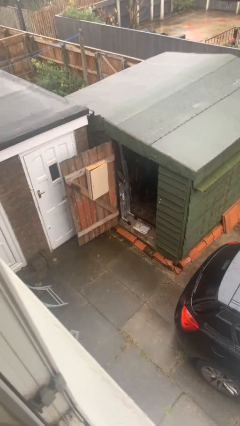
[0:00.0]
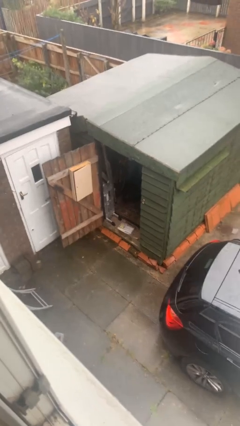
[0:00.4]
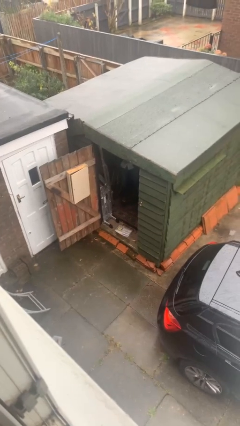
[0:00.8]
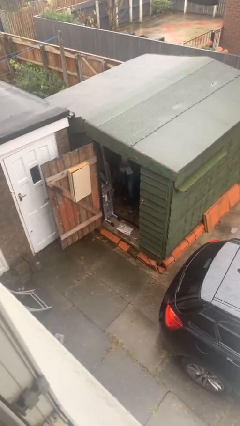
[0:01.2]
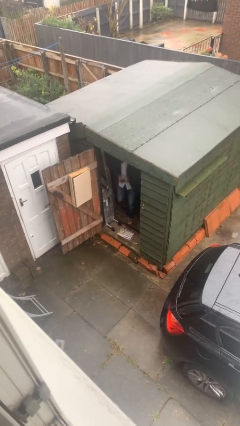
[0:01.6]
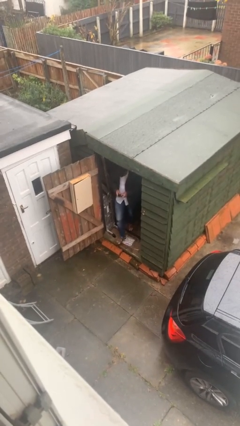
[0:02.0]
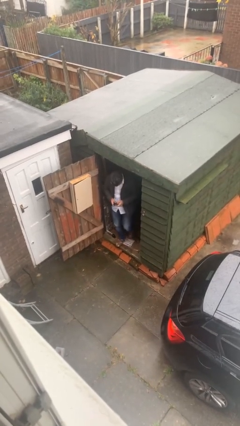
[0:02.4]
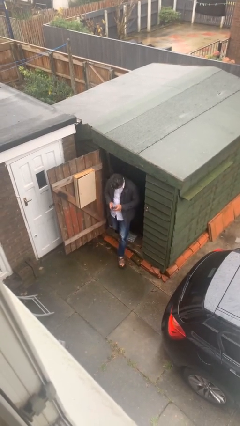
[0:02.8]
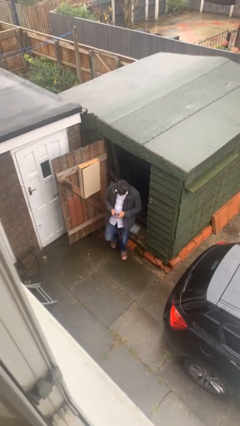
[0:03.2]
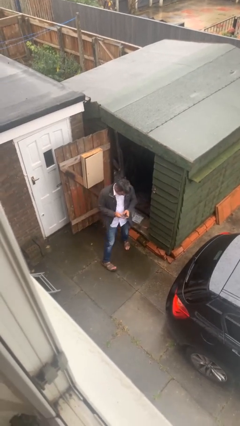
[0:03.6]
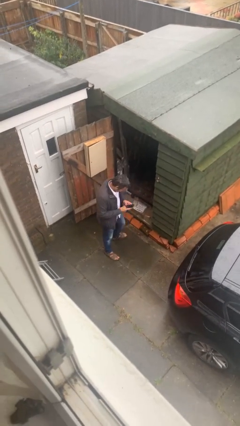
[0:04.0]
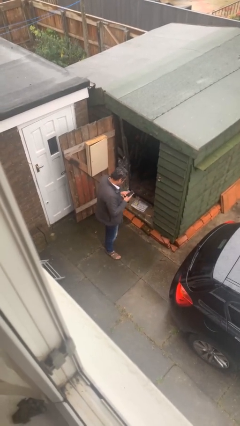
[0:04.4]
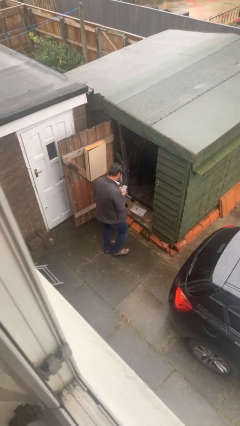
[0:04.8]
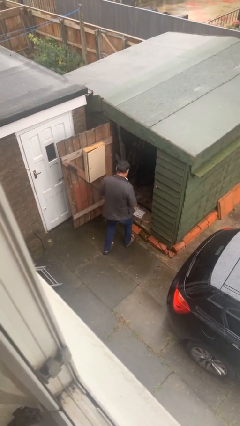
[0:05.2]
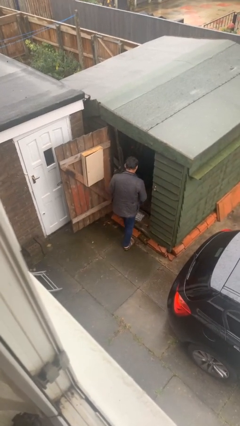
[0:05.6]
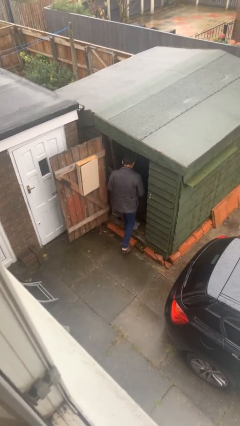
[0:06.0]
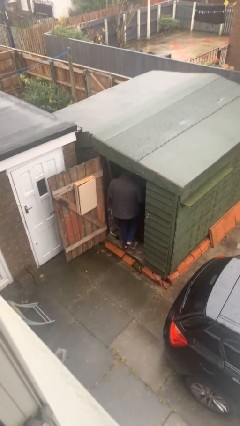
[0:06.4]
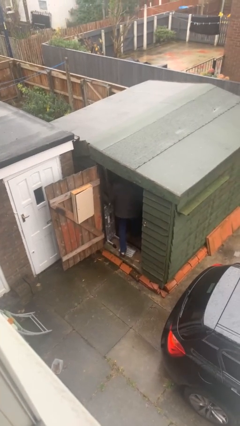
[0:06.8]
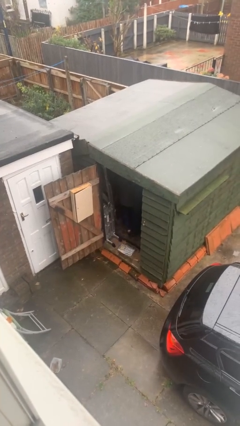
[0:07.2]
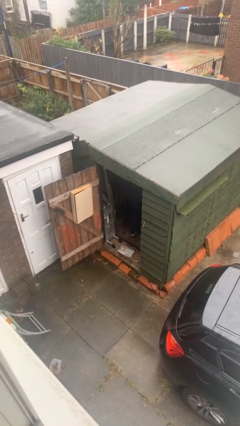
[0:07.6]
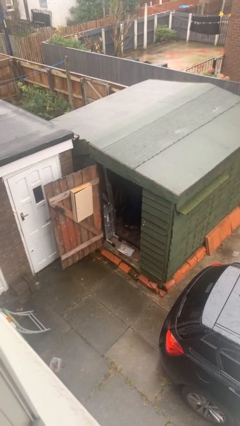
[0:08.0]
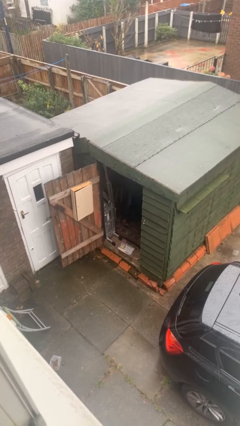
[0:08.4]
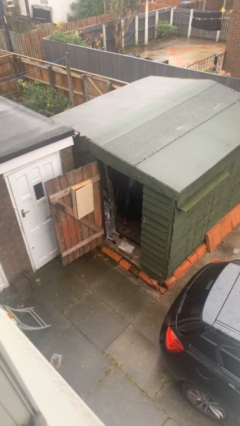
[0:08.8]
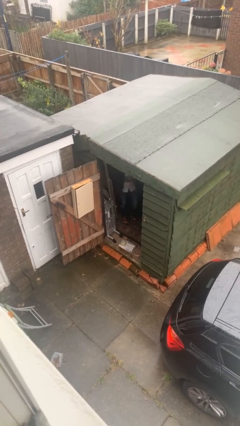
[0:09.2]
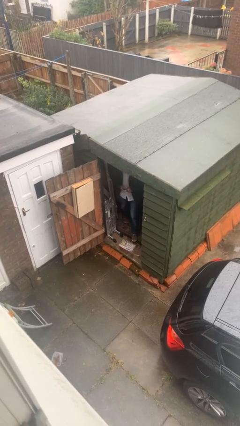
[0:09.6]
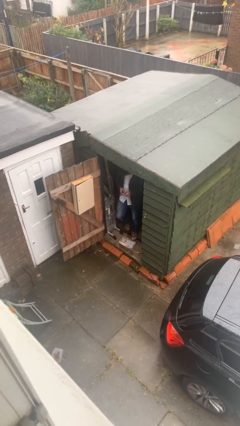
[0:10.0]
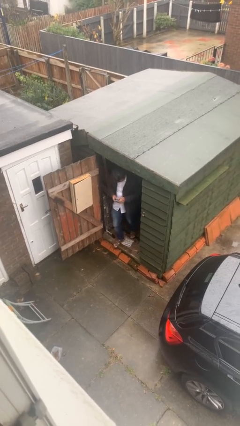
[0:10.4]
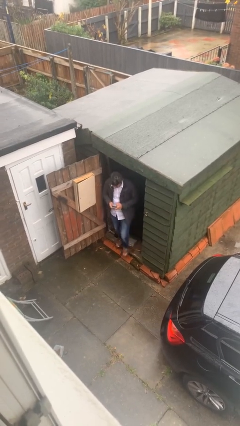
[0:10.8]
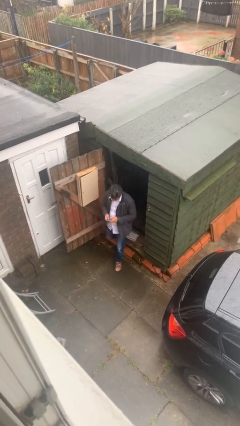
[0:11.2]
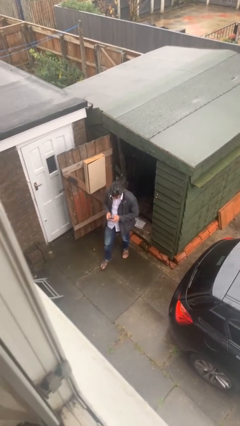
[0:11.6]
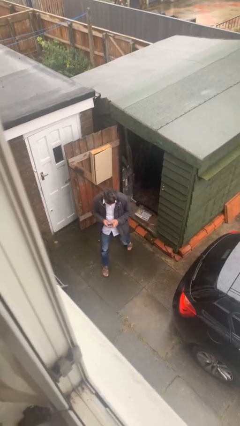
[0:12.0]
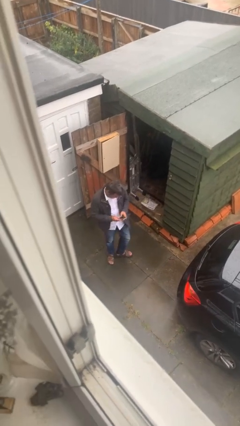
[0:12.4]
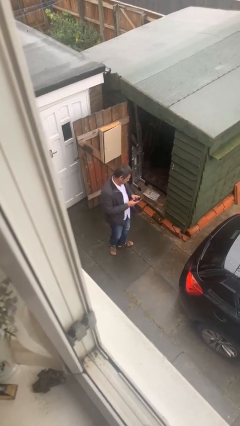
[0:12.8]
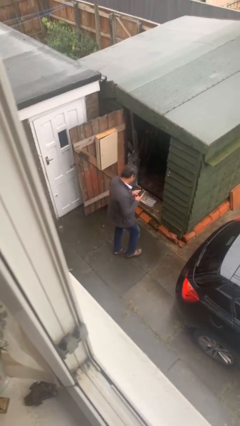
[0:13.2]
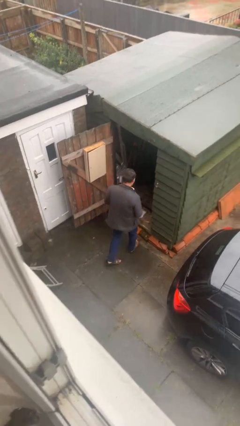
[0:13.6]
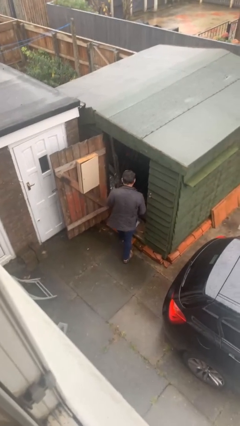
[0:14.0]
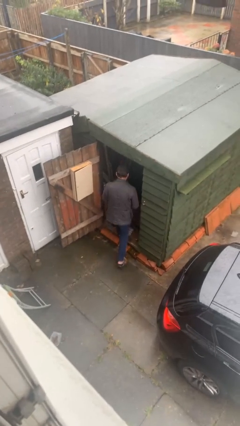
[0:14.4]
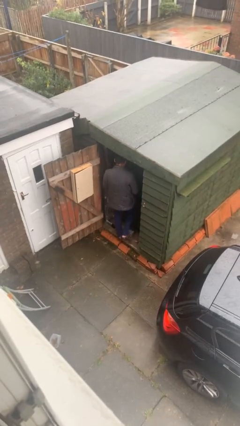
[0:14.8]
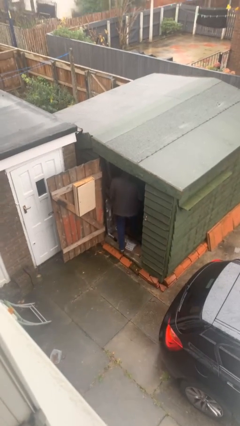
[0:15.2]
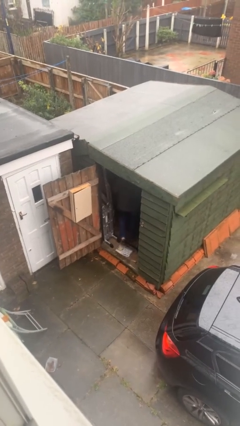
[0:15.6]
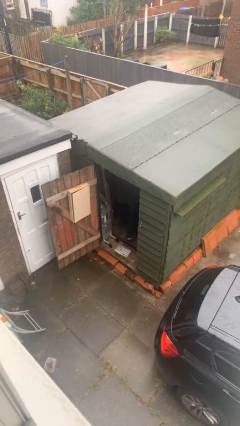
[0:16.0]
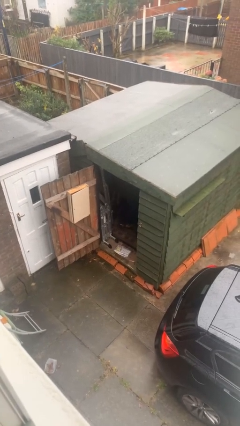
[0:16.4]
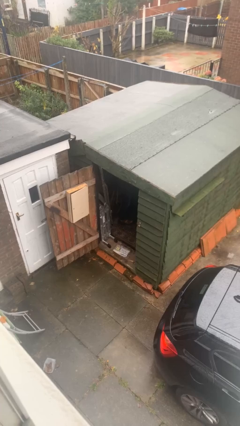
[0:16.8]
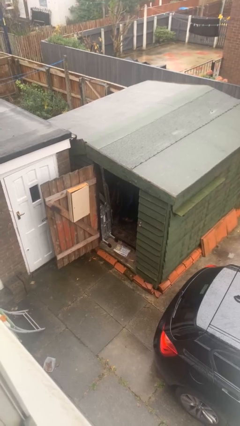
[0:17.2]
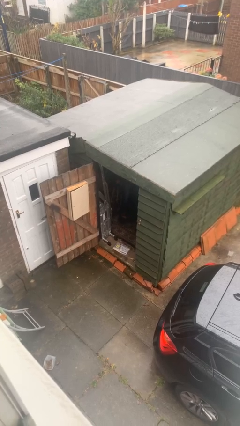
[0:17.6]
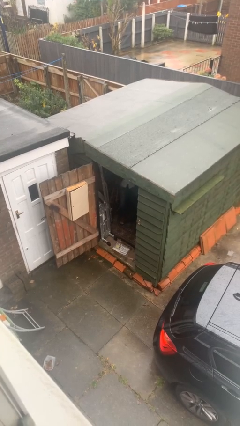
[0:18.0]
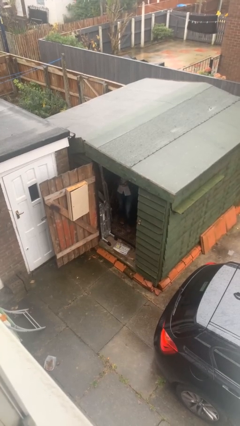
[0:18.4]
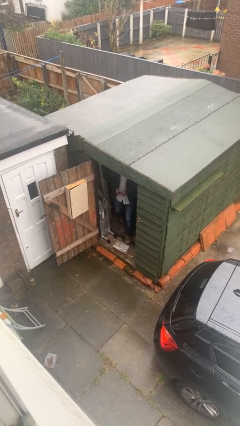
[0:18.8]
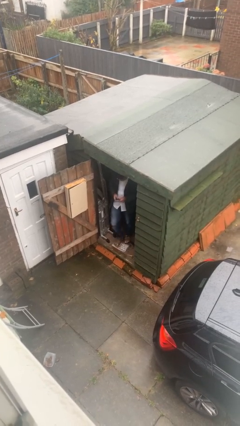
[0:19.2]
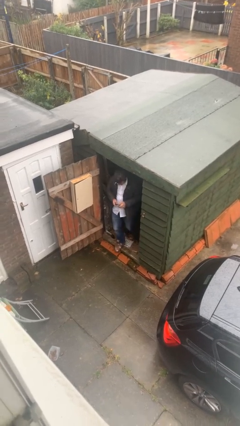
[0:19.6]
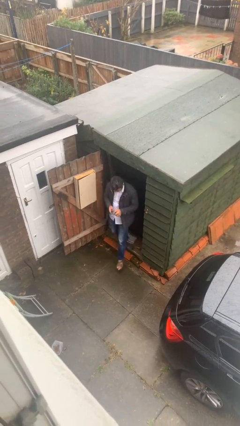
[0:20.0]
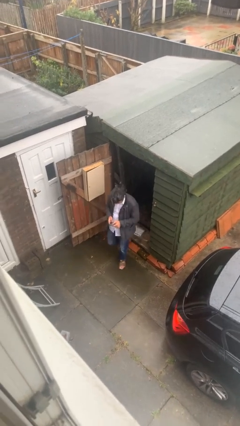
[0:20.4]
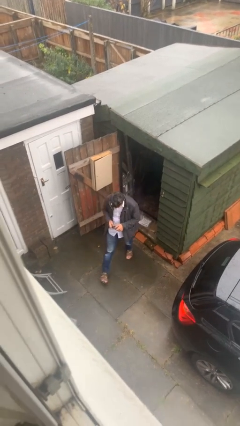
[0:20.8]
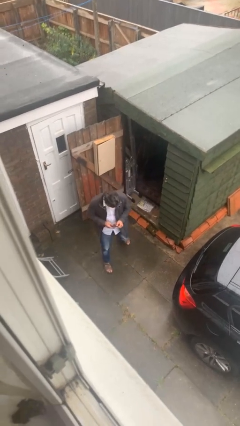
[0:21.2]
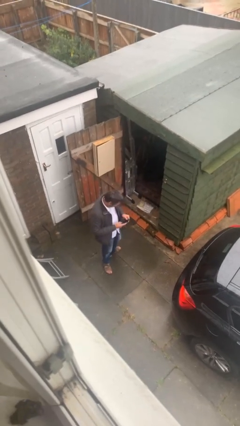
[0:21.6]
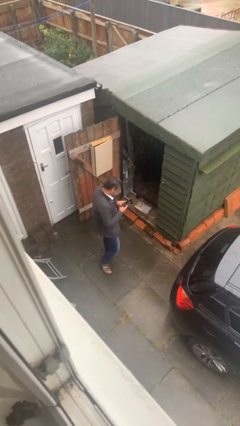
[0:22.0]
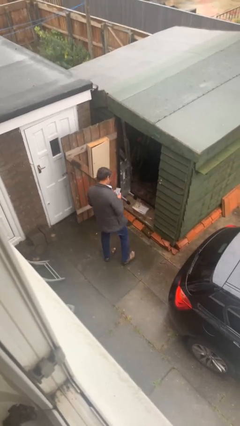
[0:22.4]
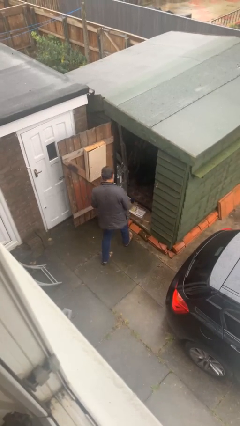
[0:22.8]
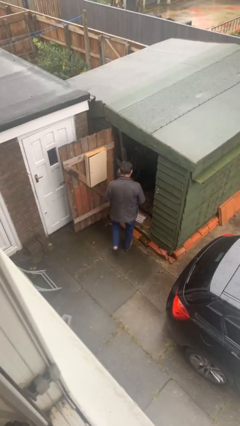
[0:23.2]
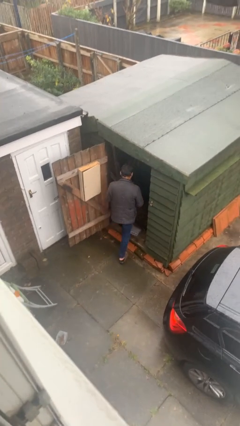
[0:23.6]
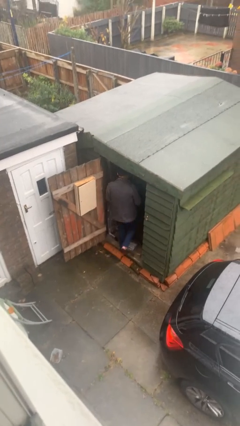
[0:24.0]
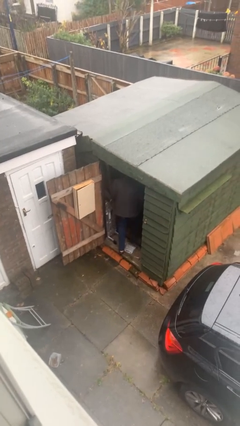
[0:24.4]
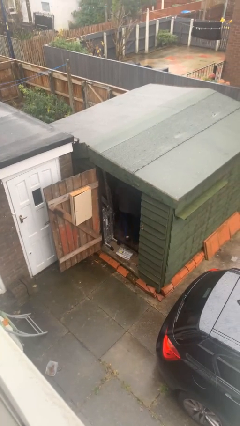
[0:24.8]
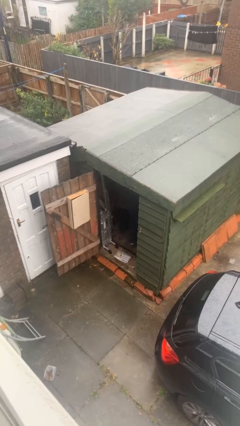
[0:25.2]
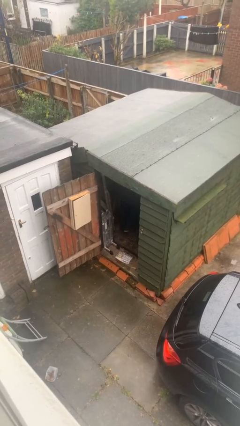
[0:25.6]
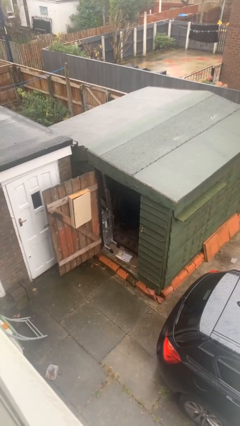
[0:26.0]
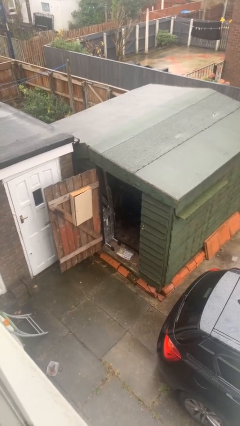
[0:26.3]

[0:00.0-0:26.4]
person texts on phone

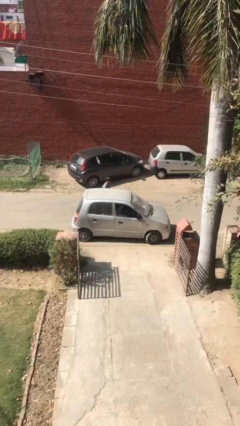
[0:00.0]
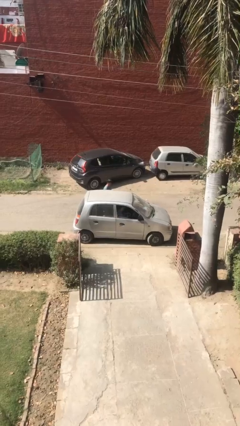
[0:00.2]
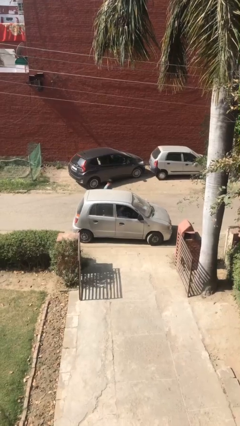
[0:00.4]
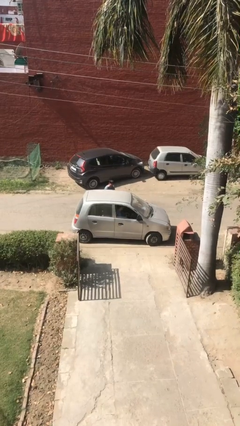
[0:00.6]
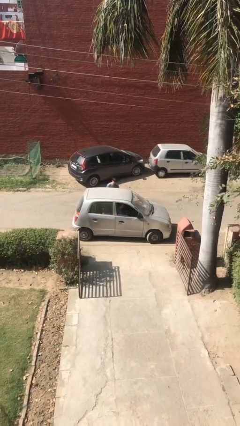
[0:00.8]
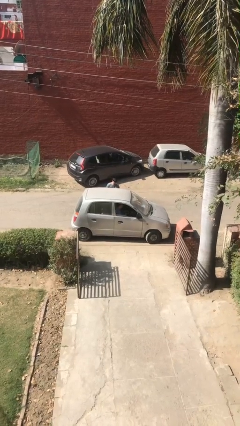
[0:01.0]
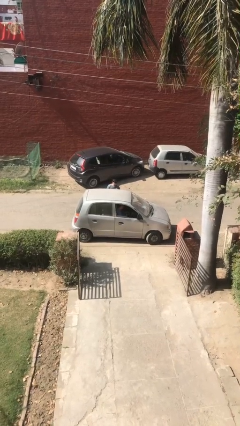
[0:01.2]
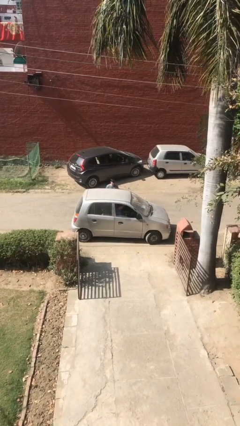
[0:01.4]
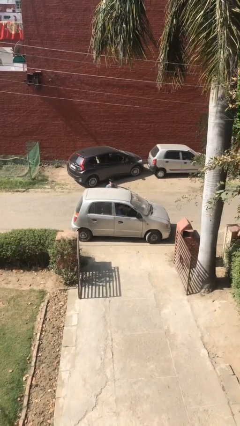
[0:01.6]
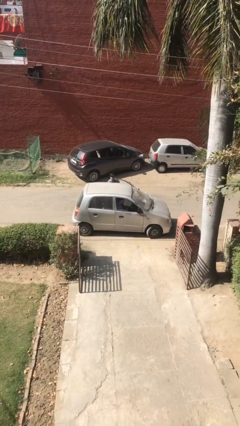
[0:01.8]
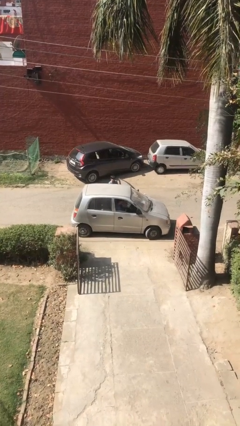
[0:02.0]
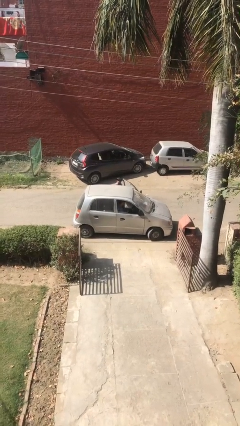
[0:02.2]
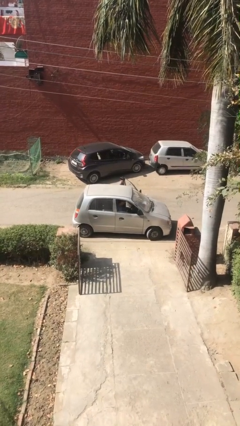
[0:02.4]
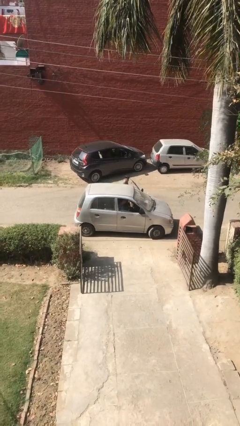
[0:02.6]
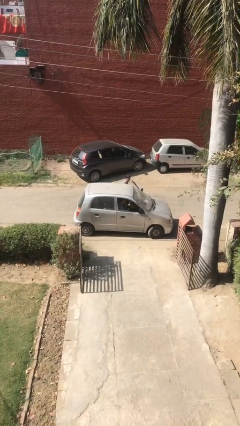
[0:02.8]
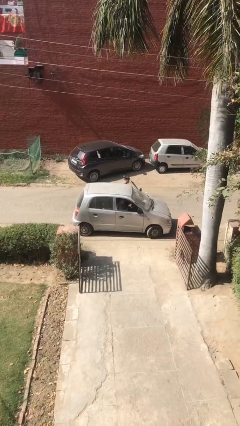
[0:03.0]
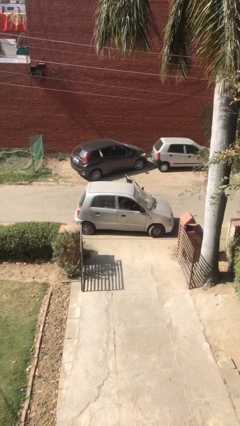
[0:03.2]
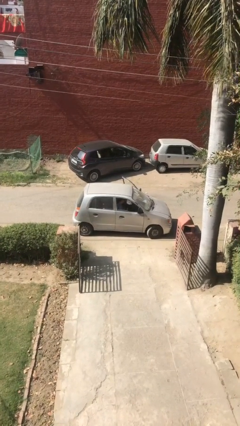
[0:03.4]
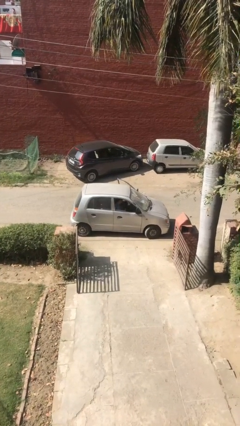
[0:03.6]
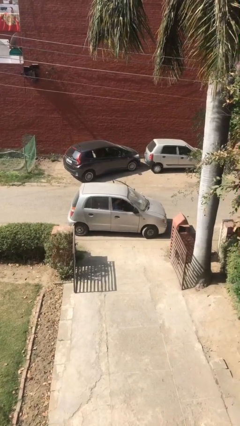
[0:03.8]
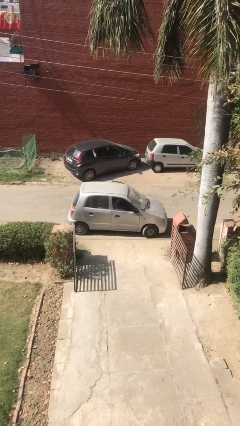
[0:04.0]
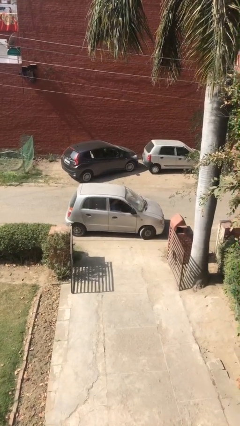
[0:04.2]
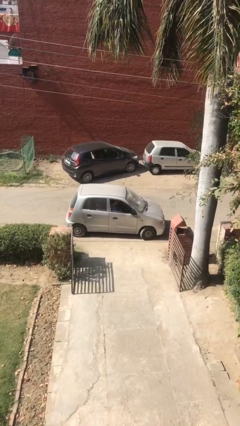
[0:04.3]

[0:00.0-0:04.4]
car picks up person

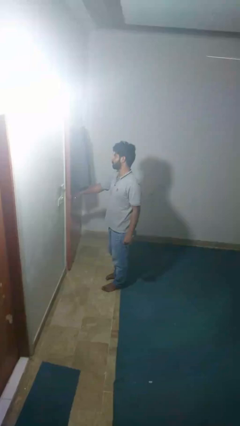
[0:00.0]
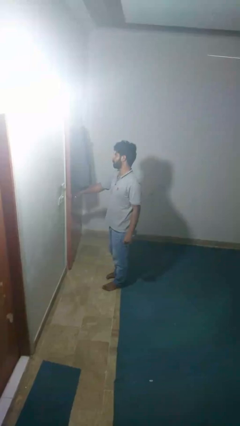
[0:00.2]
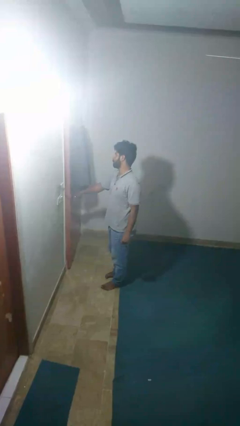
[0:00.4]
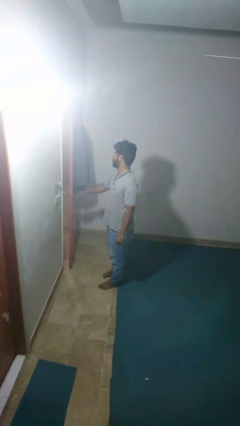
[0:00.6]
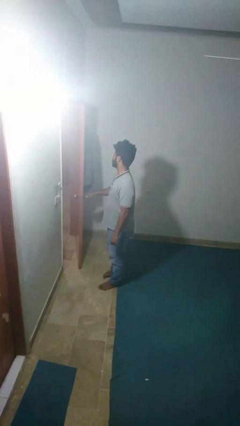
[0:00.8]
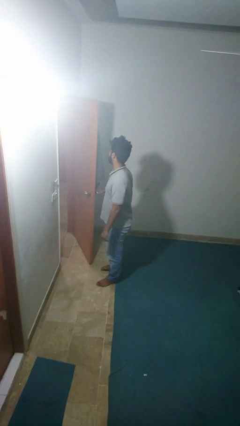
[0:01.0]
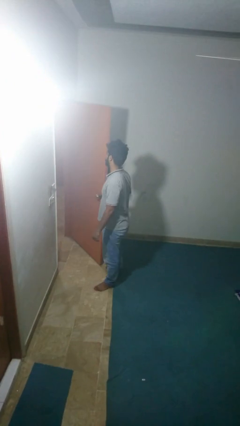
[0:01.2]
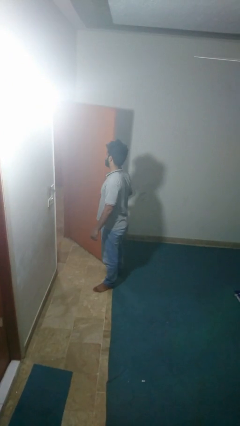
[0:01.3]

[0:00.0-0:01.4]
person opens facility door
